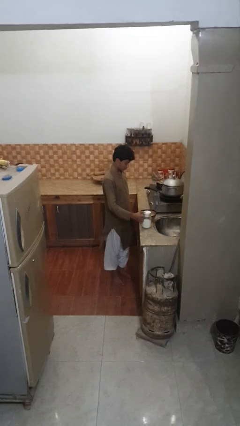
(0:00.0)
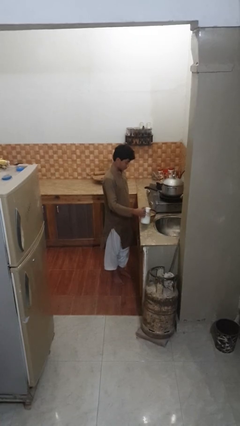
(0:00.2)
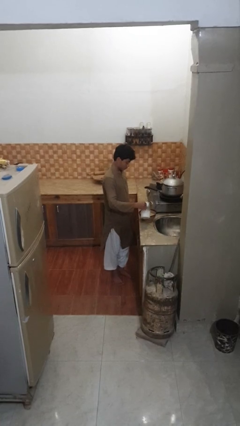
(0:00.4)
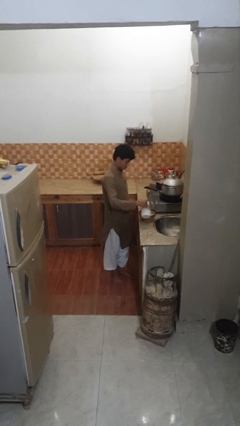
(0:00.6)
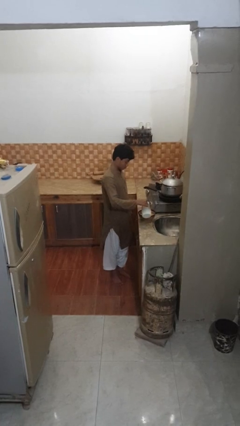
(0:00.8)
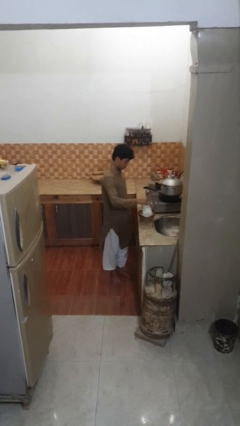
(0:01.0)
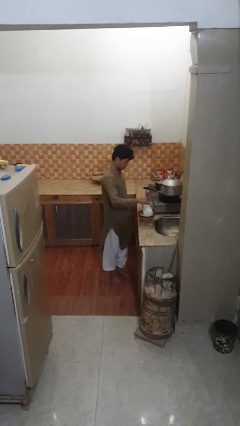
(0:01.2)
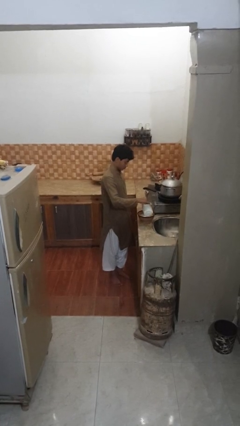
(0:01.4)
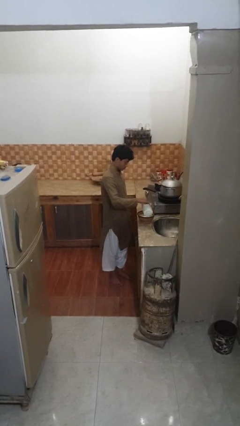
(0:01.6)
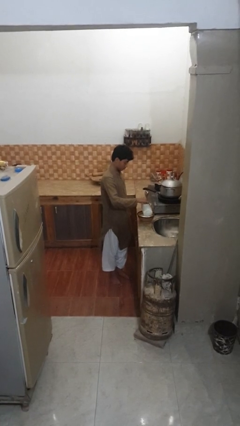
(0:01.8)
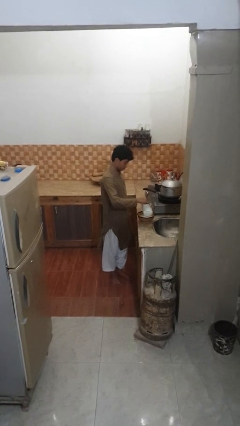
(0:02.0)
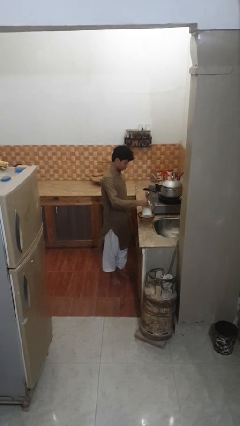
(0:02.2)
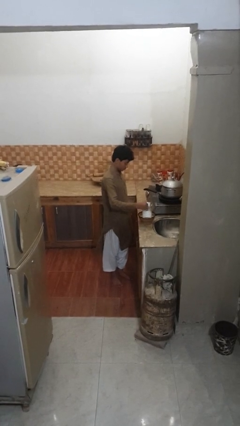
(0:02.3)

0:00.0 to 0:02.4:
person pours into bowl

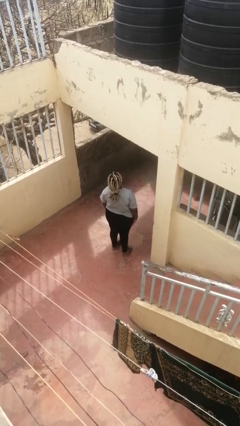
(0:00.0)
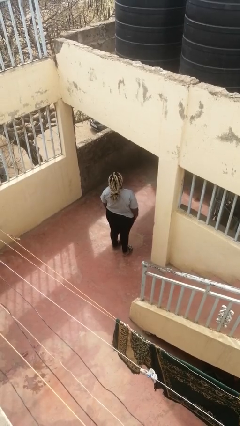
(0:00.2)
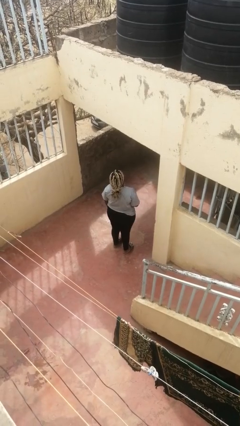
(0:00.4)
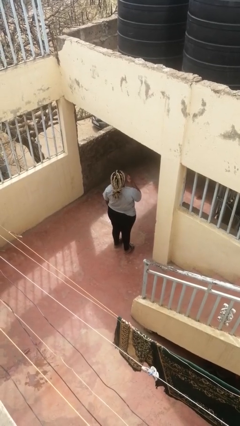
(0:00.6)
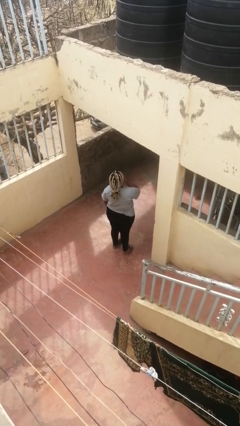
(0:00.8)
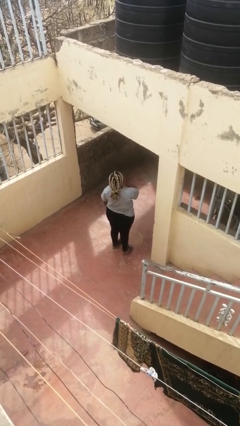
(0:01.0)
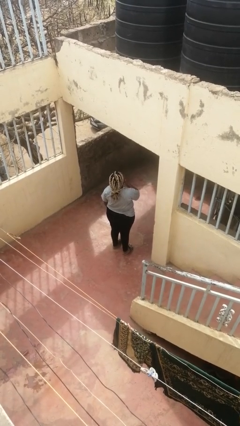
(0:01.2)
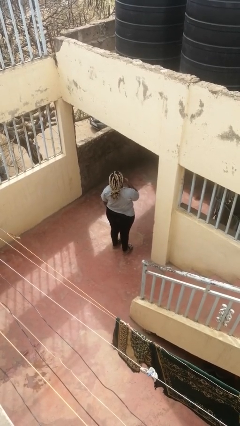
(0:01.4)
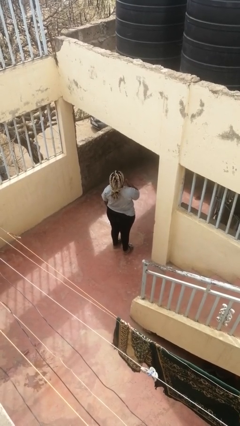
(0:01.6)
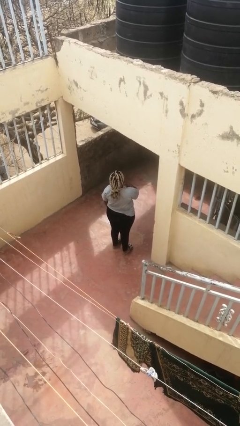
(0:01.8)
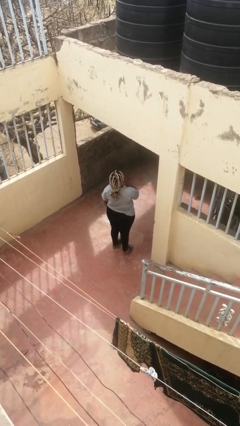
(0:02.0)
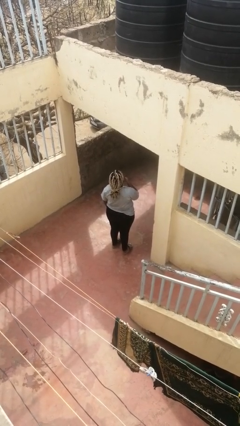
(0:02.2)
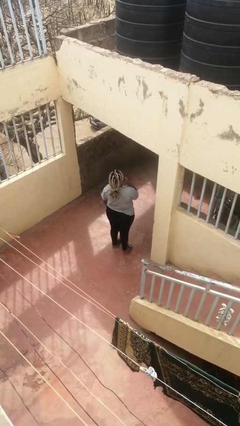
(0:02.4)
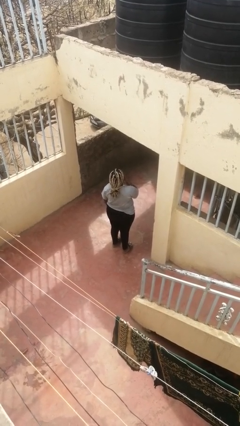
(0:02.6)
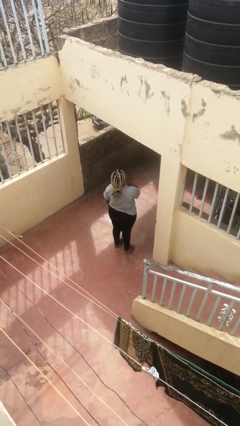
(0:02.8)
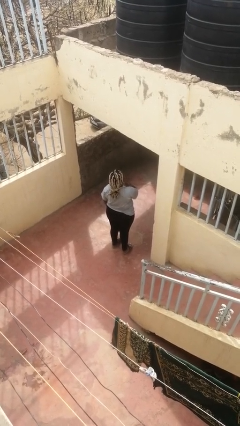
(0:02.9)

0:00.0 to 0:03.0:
person strokes chin

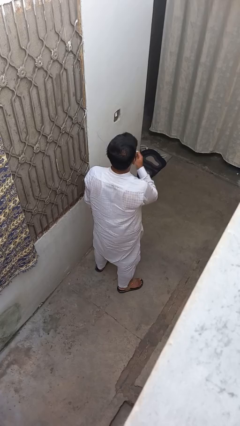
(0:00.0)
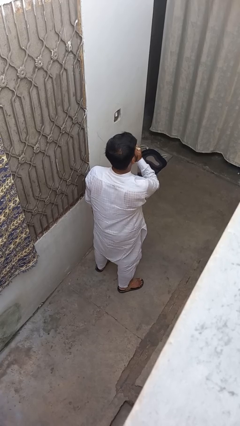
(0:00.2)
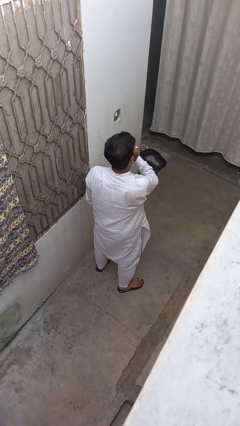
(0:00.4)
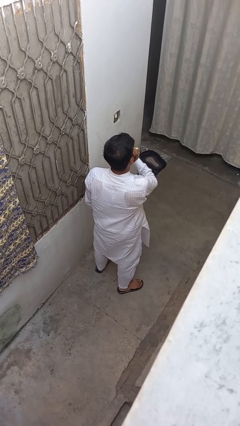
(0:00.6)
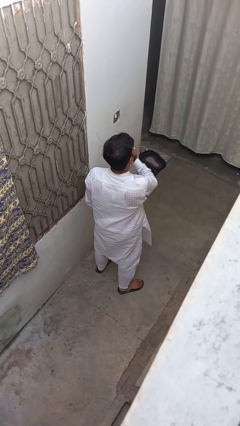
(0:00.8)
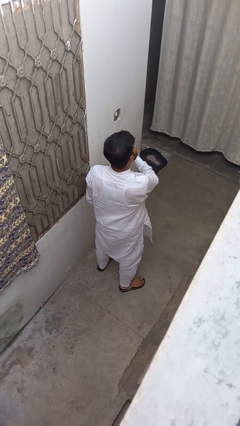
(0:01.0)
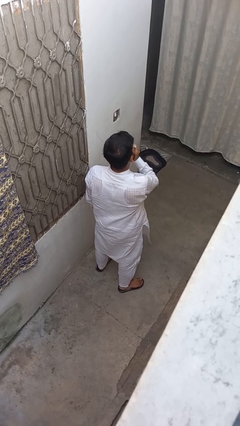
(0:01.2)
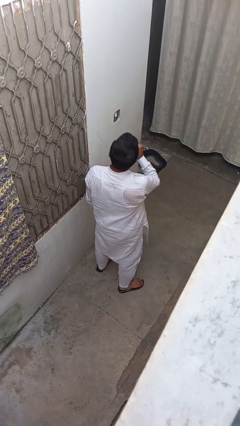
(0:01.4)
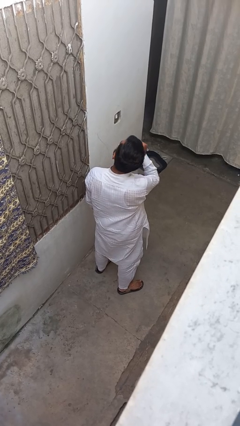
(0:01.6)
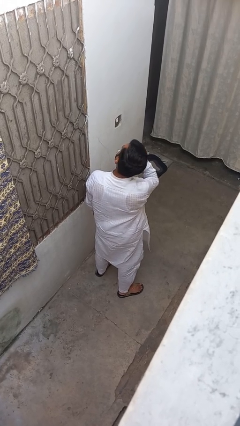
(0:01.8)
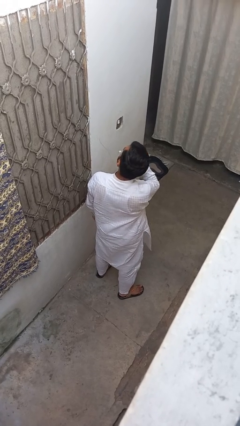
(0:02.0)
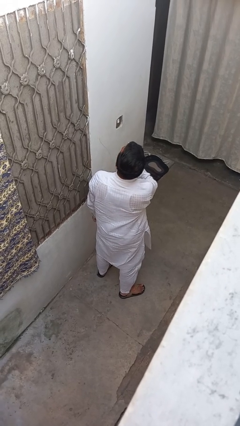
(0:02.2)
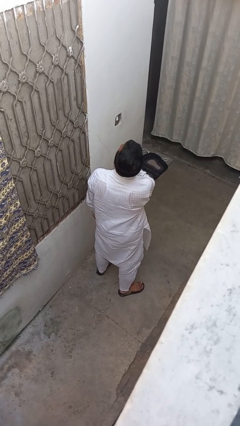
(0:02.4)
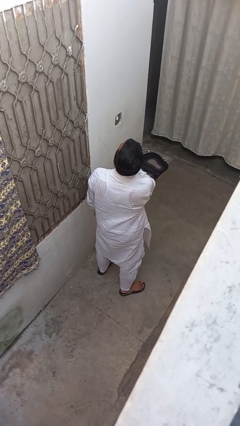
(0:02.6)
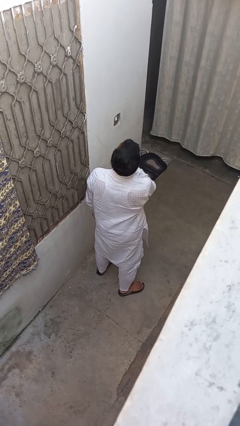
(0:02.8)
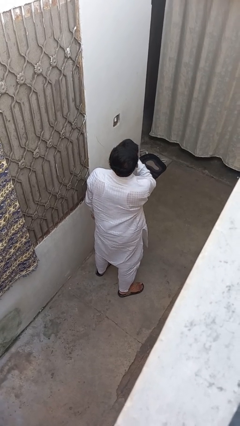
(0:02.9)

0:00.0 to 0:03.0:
person brushes teeth

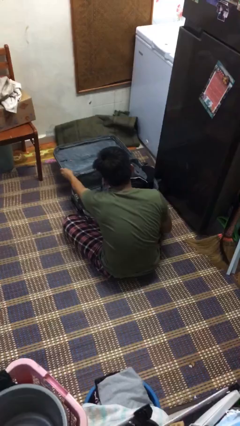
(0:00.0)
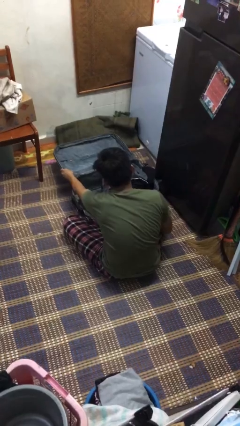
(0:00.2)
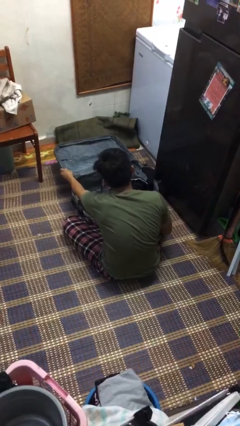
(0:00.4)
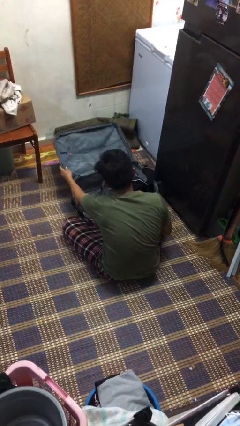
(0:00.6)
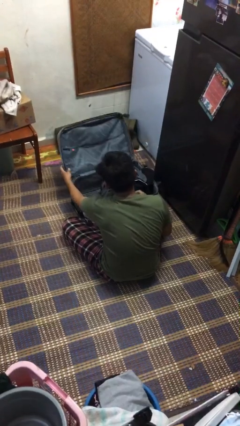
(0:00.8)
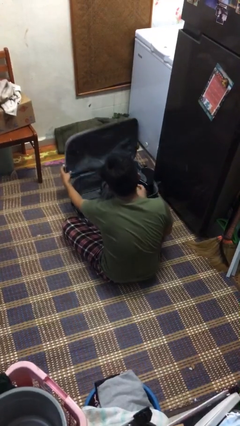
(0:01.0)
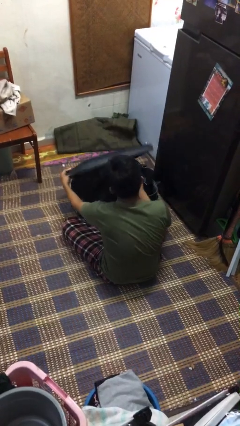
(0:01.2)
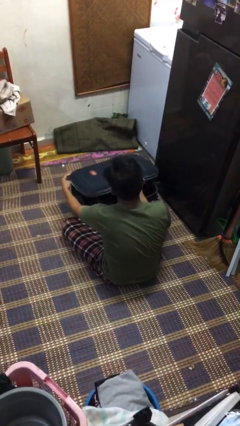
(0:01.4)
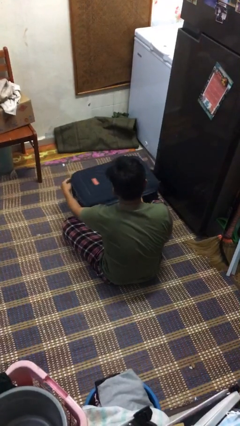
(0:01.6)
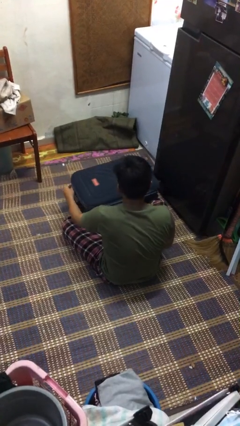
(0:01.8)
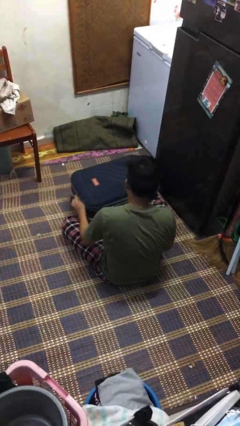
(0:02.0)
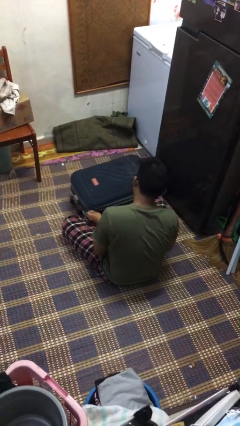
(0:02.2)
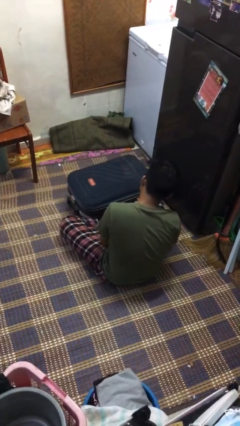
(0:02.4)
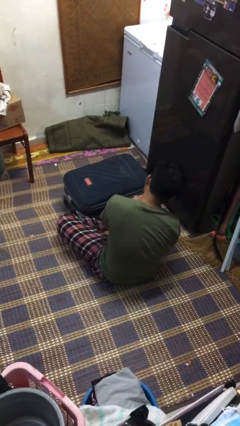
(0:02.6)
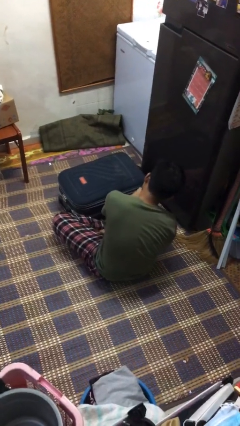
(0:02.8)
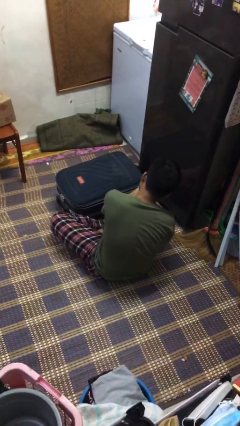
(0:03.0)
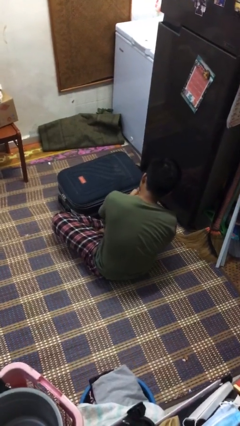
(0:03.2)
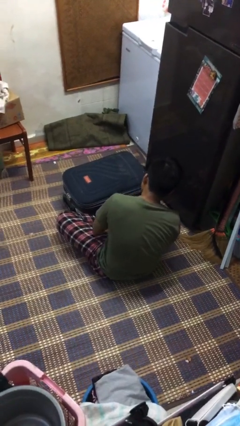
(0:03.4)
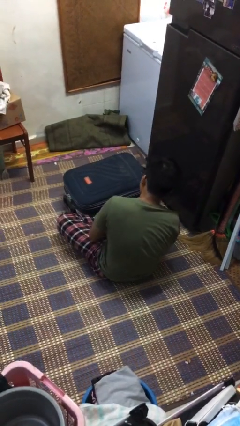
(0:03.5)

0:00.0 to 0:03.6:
person closes suitcase

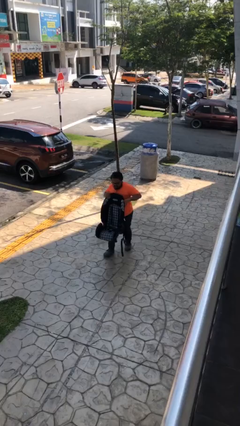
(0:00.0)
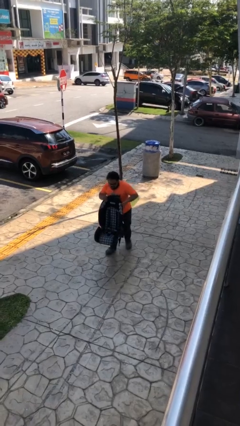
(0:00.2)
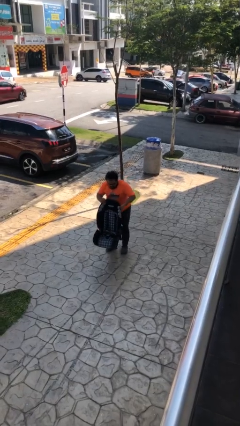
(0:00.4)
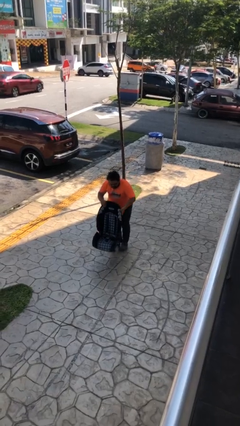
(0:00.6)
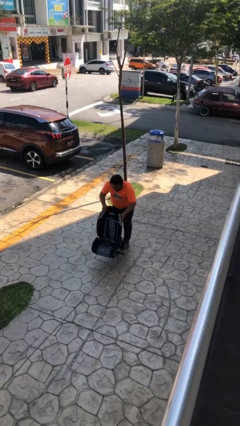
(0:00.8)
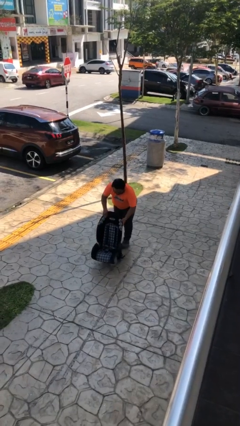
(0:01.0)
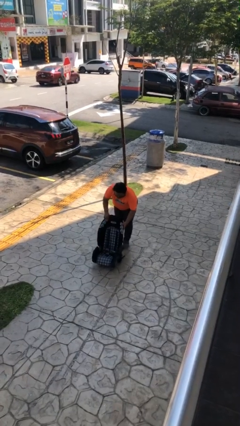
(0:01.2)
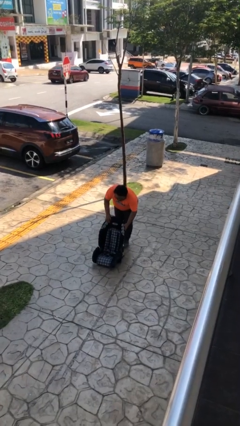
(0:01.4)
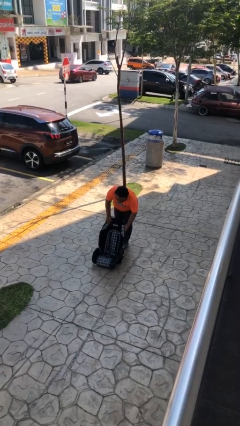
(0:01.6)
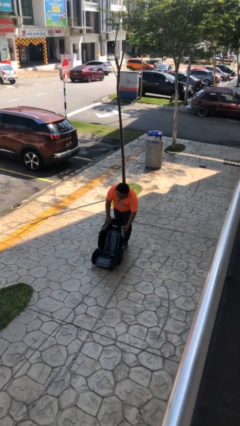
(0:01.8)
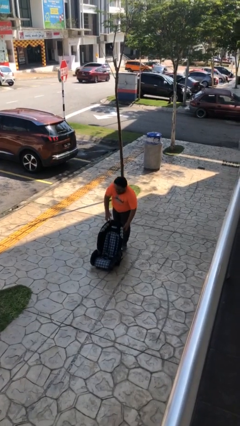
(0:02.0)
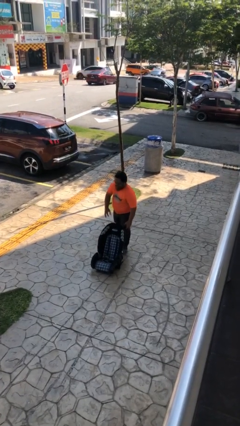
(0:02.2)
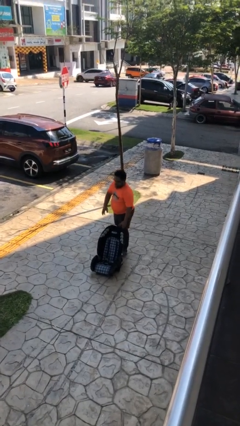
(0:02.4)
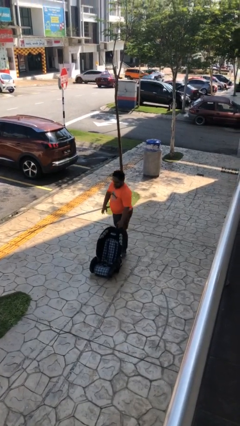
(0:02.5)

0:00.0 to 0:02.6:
person puts down object on floor

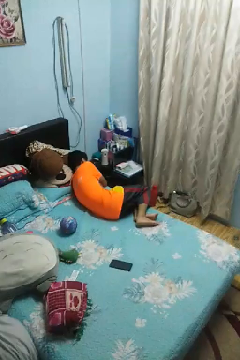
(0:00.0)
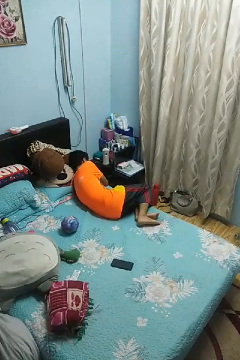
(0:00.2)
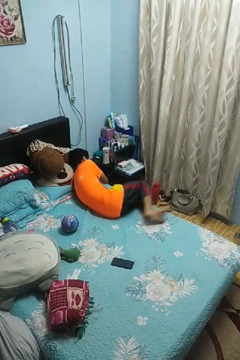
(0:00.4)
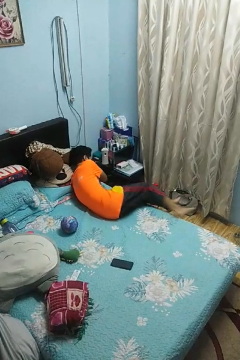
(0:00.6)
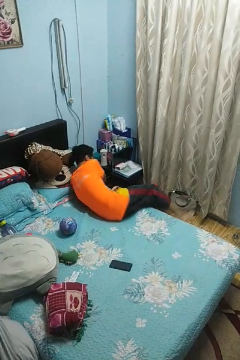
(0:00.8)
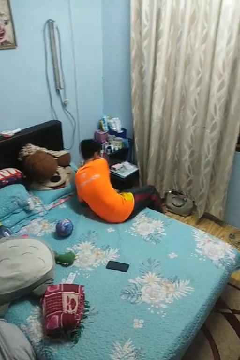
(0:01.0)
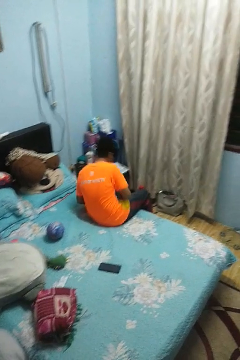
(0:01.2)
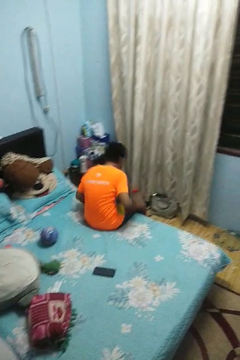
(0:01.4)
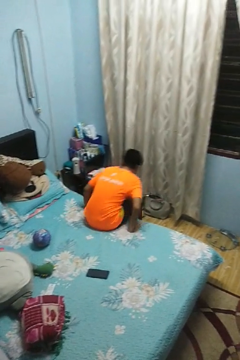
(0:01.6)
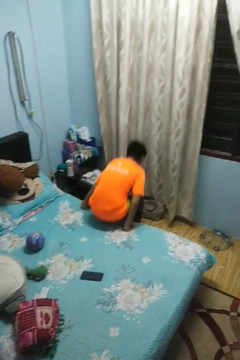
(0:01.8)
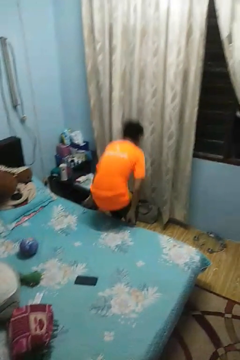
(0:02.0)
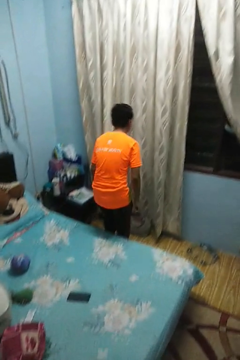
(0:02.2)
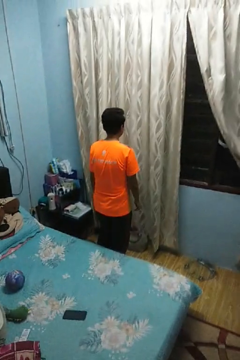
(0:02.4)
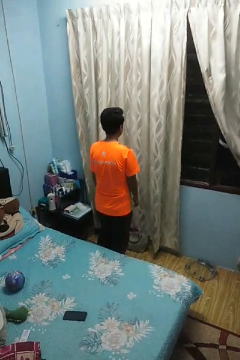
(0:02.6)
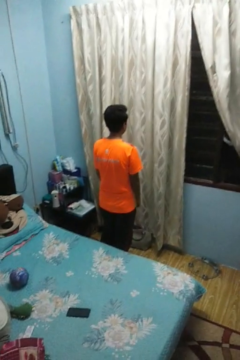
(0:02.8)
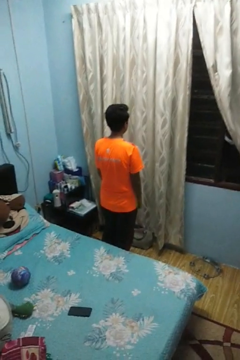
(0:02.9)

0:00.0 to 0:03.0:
person stands up
